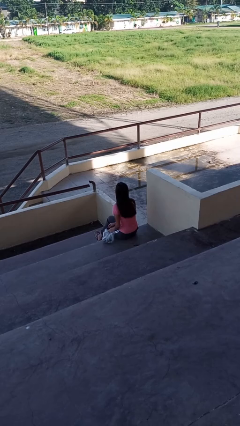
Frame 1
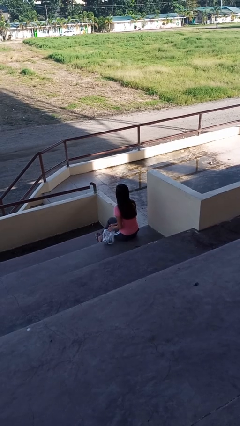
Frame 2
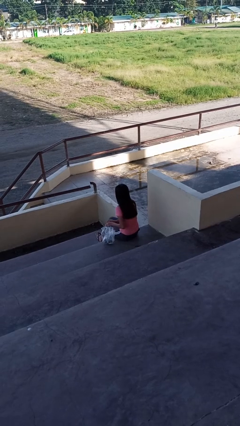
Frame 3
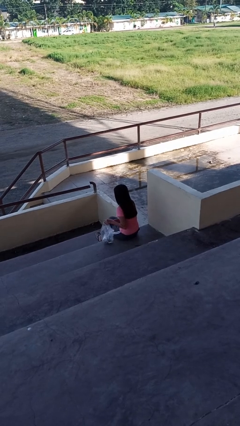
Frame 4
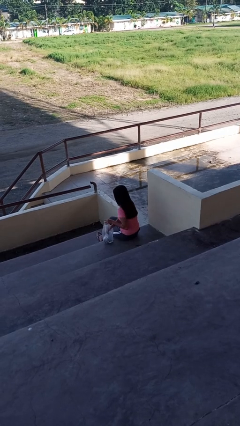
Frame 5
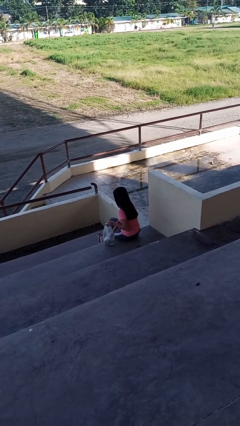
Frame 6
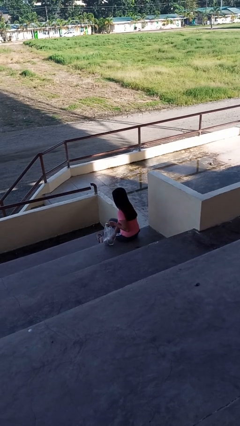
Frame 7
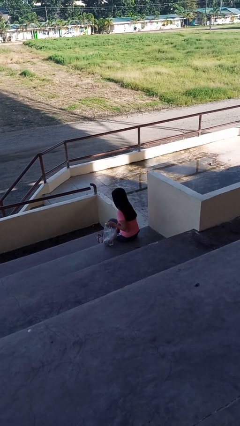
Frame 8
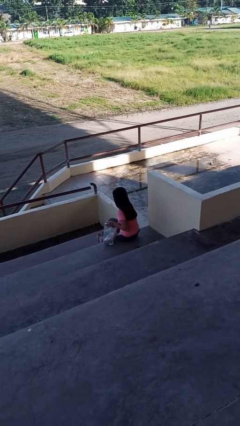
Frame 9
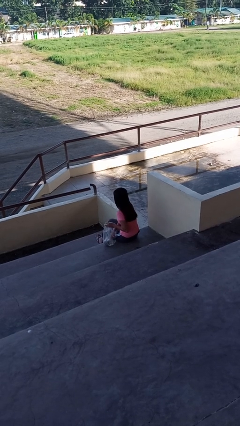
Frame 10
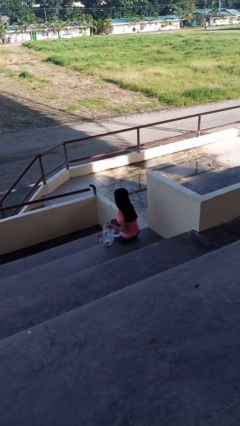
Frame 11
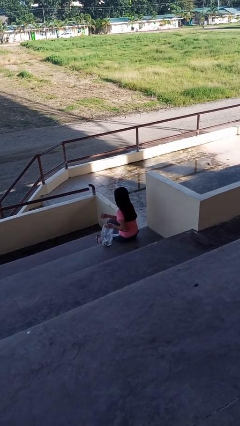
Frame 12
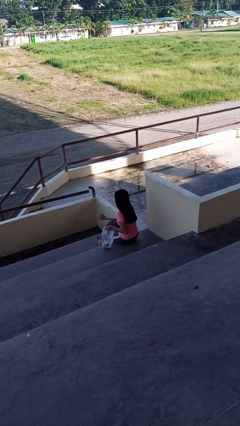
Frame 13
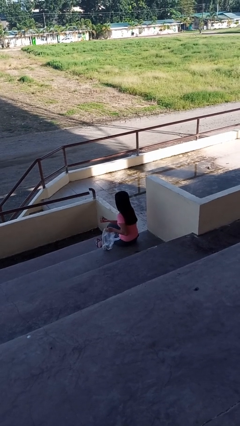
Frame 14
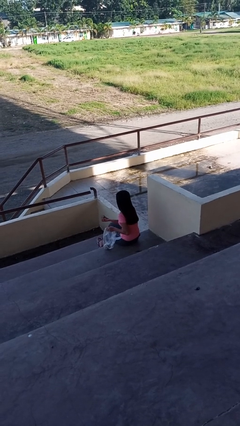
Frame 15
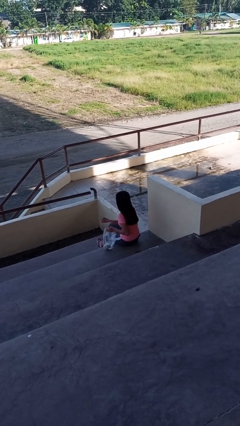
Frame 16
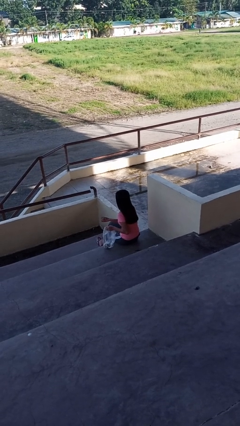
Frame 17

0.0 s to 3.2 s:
person takes object from bag

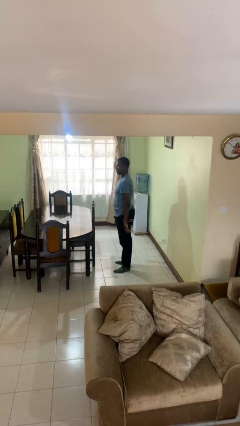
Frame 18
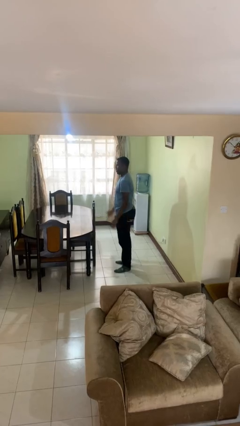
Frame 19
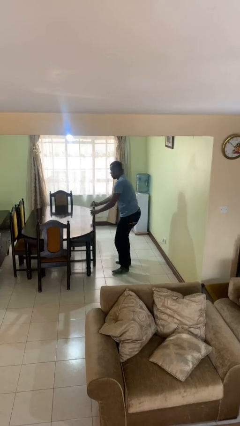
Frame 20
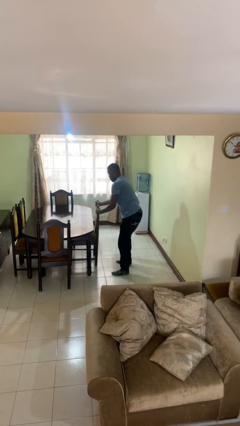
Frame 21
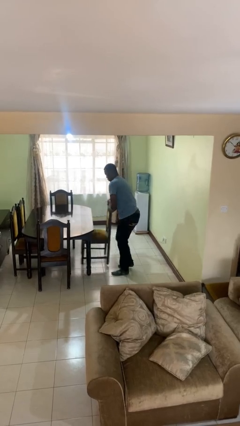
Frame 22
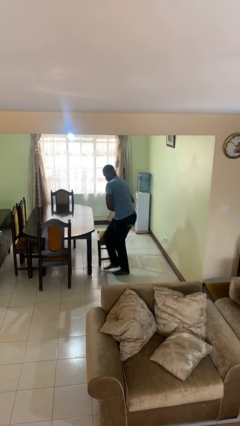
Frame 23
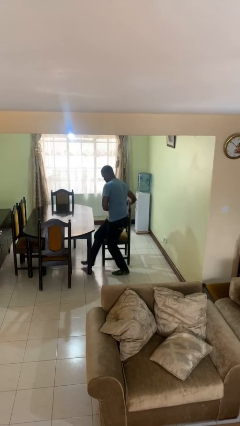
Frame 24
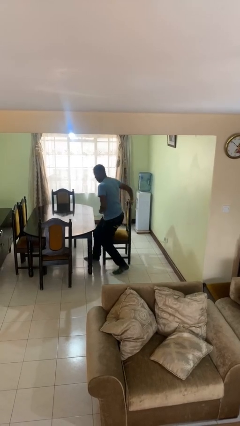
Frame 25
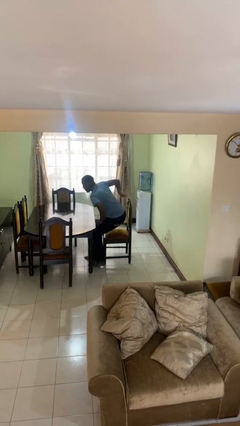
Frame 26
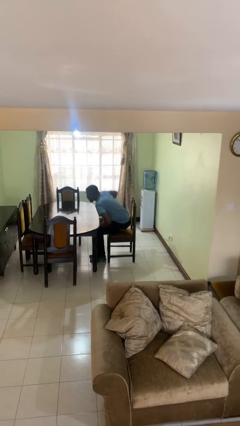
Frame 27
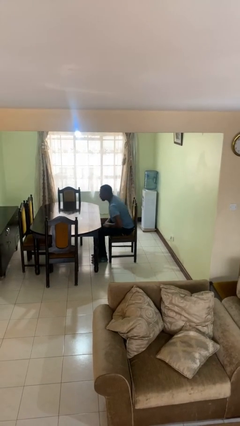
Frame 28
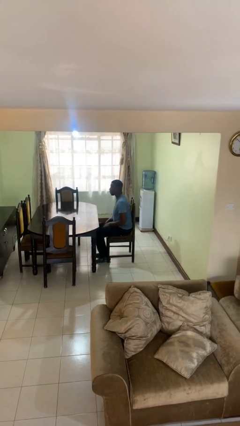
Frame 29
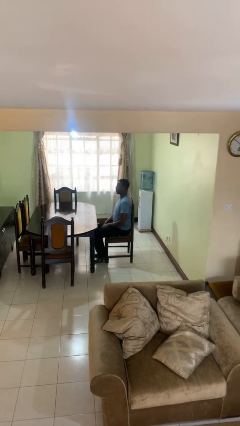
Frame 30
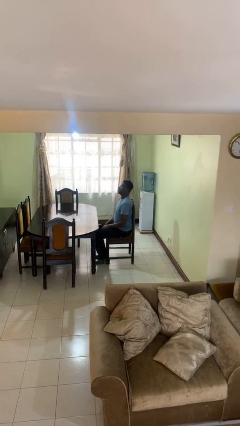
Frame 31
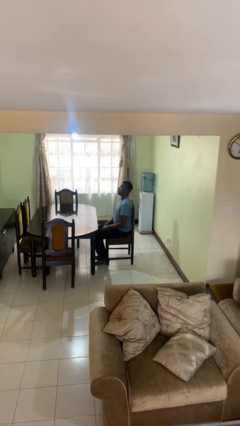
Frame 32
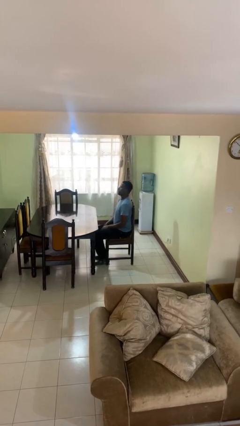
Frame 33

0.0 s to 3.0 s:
person sits down

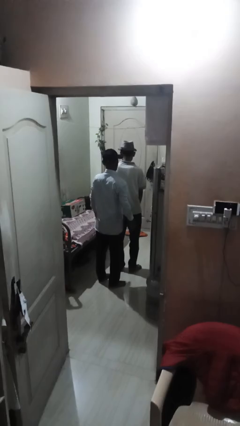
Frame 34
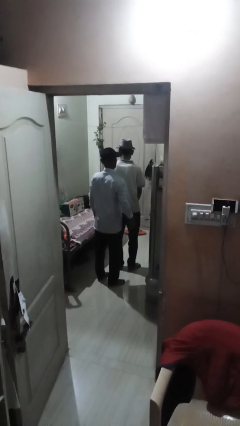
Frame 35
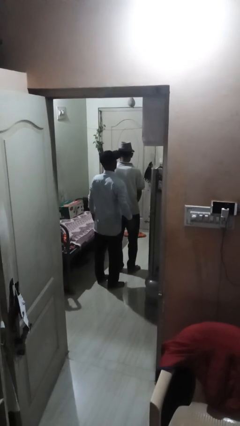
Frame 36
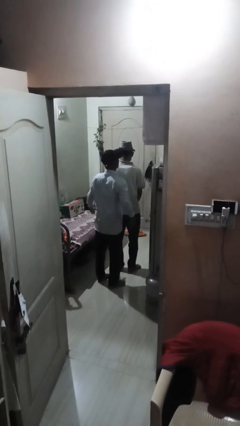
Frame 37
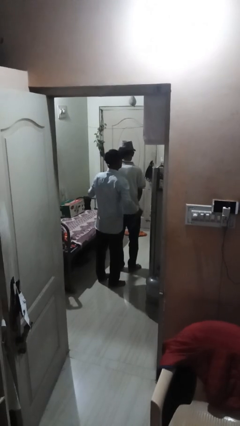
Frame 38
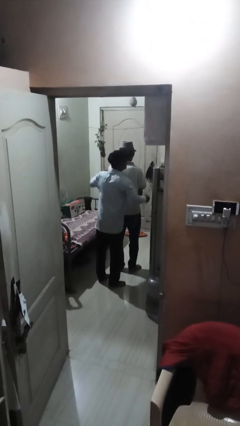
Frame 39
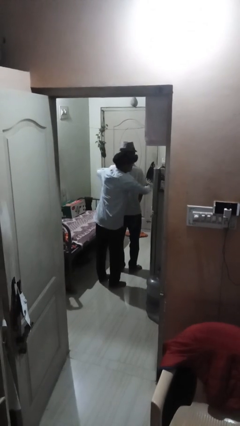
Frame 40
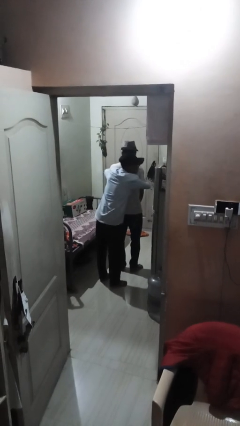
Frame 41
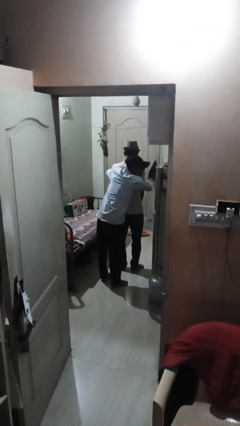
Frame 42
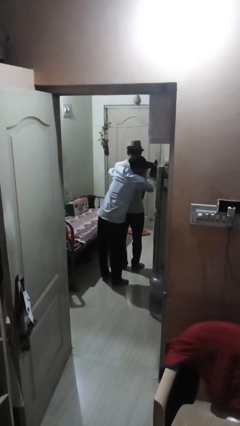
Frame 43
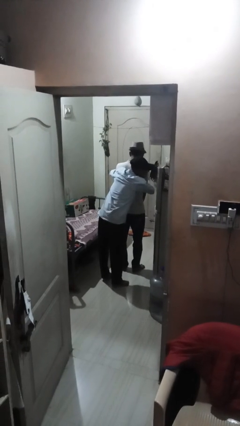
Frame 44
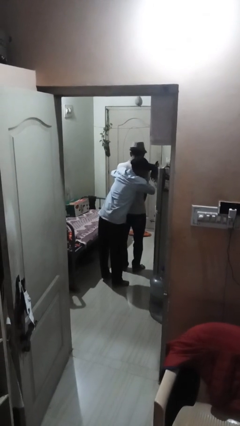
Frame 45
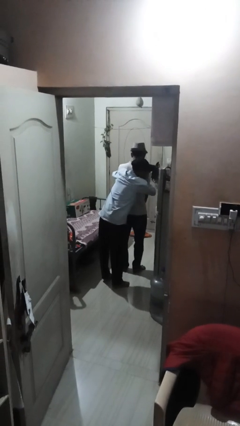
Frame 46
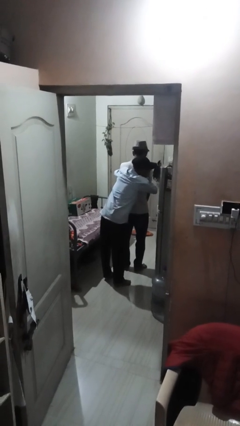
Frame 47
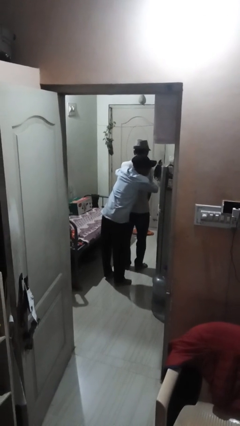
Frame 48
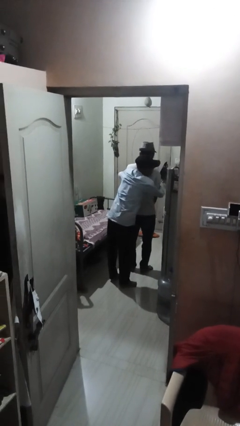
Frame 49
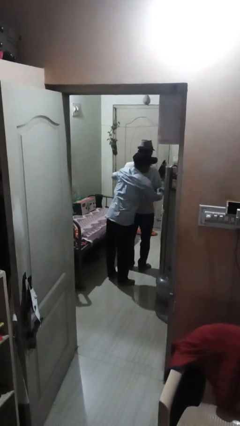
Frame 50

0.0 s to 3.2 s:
person hugs person from behind

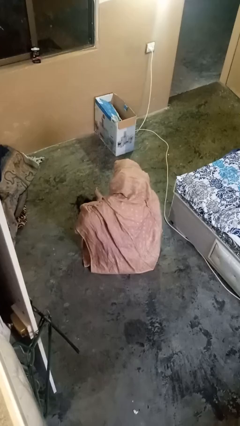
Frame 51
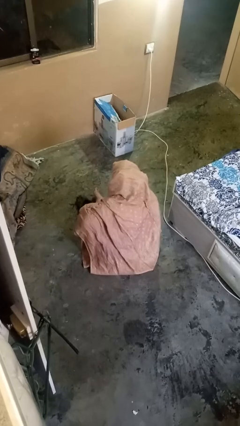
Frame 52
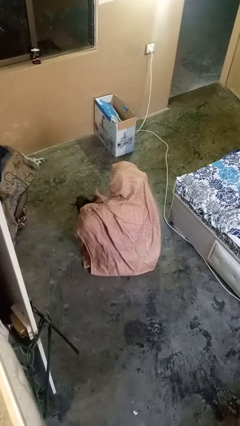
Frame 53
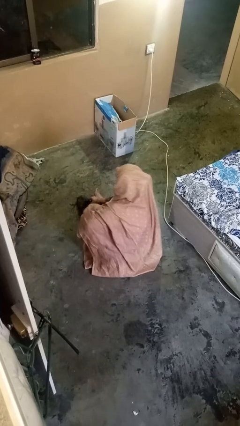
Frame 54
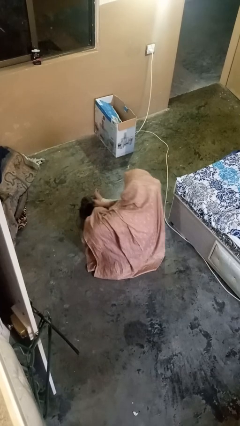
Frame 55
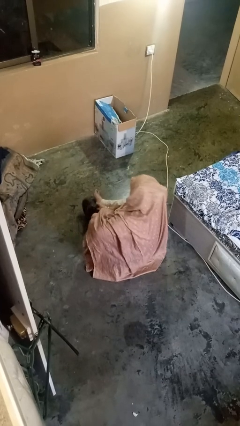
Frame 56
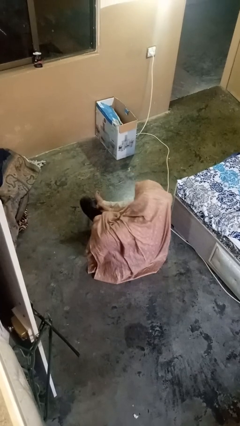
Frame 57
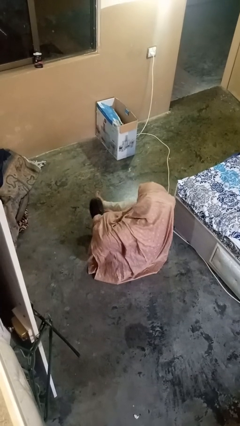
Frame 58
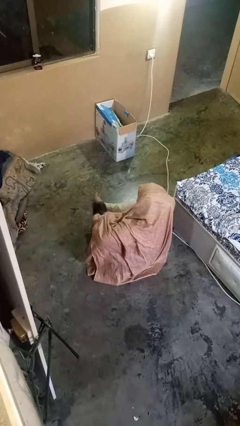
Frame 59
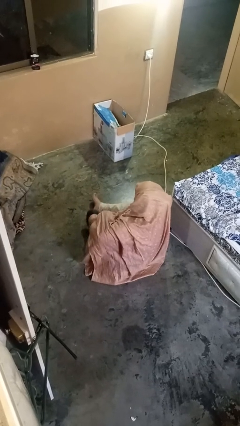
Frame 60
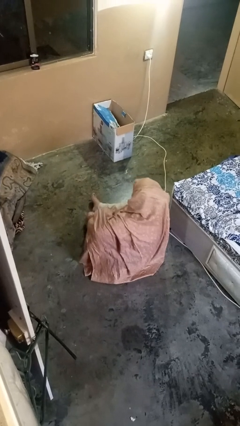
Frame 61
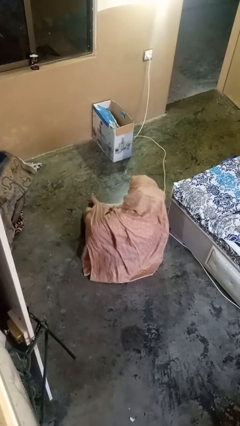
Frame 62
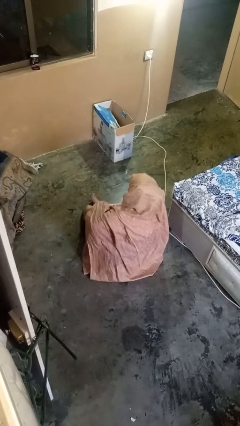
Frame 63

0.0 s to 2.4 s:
person puts on shoes

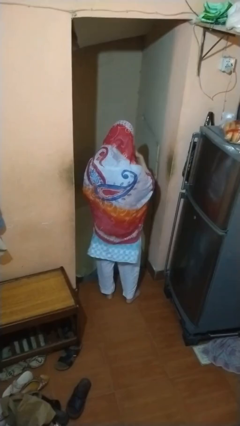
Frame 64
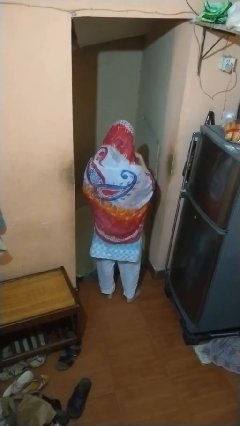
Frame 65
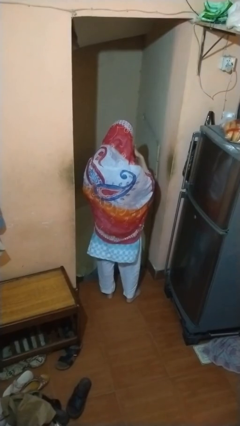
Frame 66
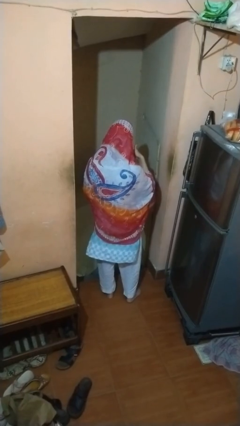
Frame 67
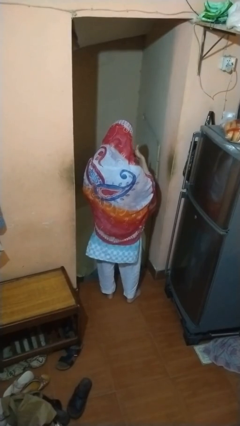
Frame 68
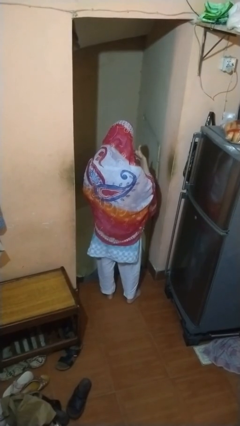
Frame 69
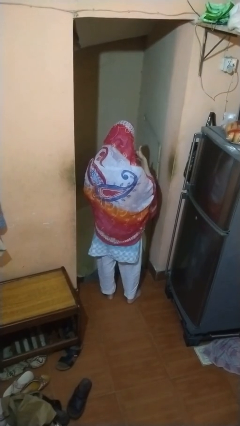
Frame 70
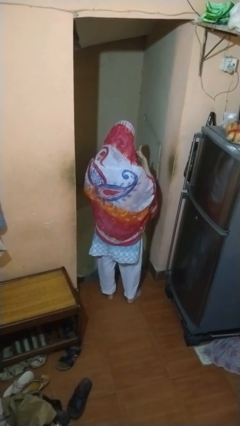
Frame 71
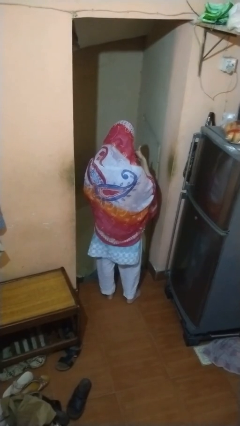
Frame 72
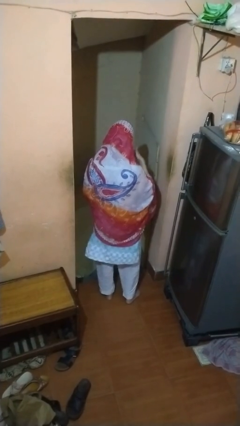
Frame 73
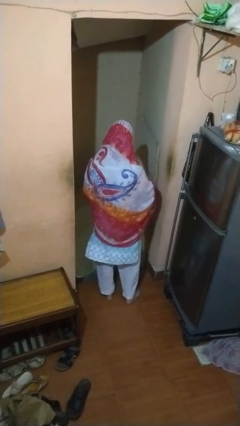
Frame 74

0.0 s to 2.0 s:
person gestures call me

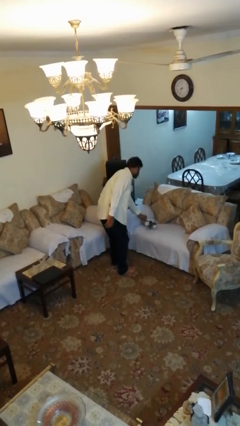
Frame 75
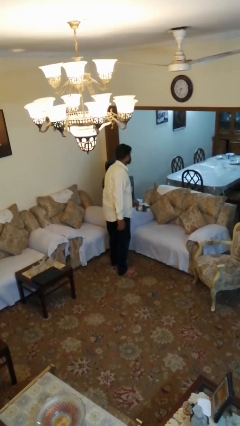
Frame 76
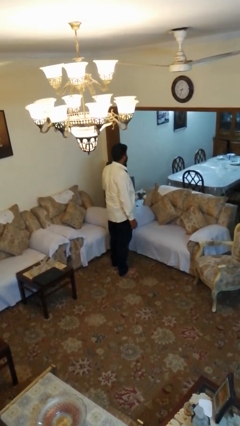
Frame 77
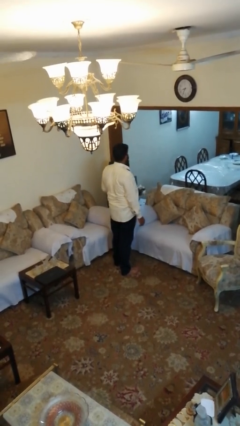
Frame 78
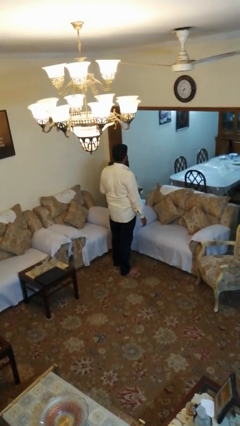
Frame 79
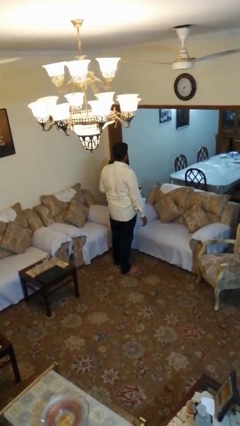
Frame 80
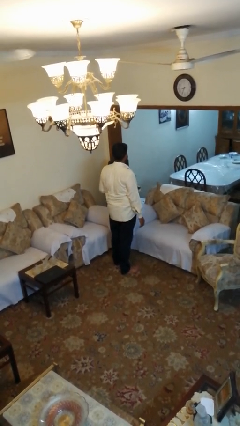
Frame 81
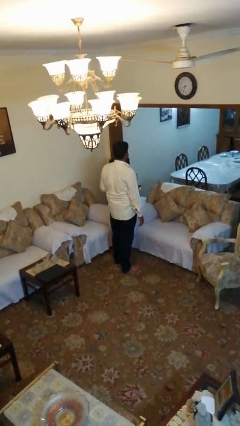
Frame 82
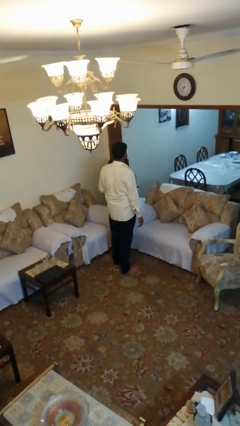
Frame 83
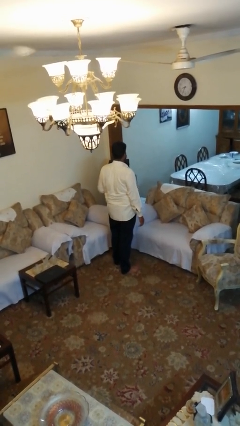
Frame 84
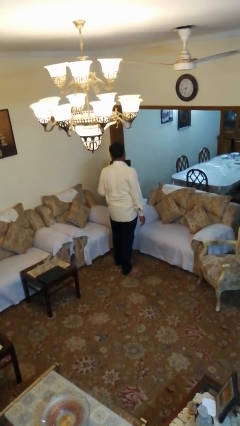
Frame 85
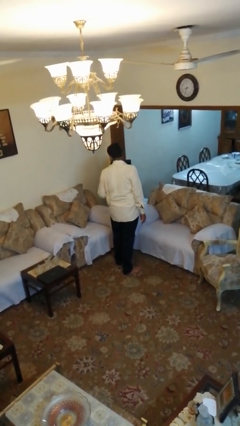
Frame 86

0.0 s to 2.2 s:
person picks up object from couch

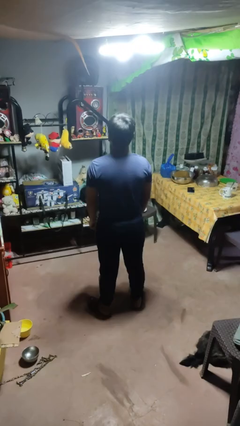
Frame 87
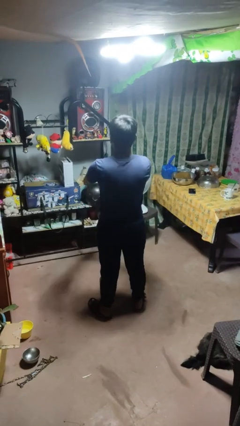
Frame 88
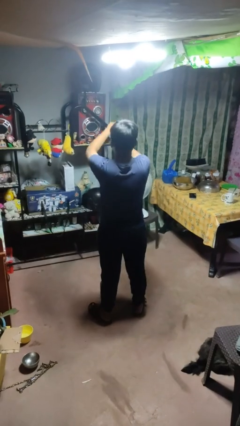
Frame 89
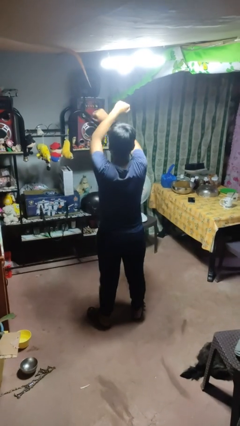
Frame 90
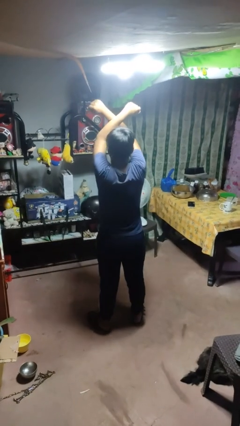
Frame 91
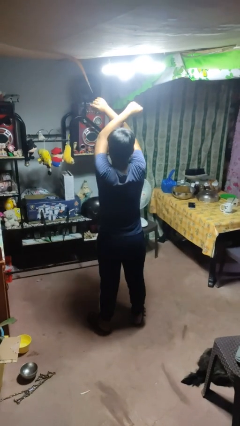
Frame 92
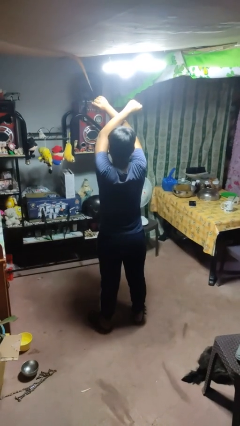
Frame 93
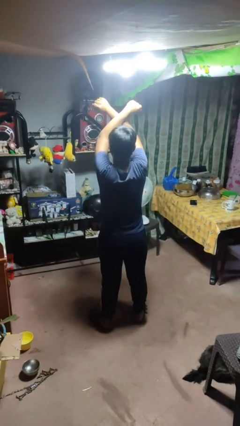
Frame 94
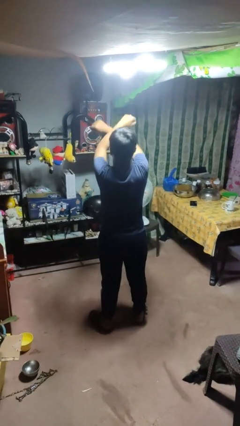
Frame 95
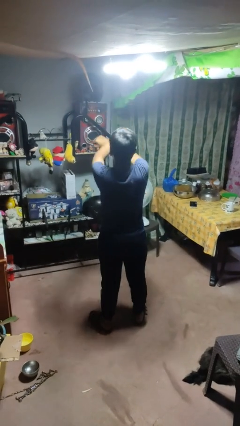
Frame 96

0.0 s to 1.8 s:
person gestures arms x
